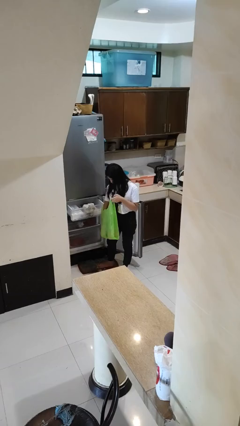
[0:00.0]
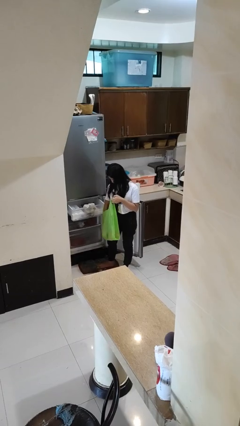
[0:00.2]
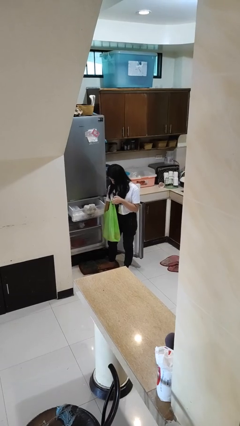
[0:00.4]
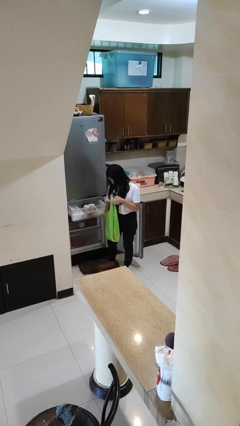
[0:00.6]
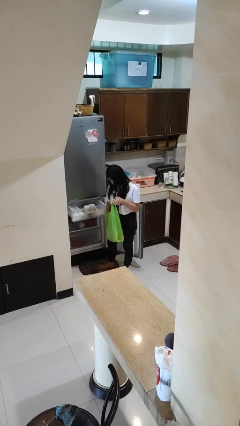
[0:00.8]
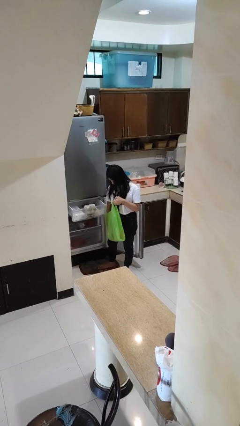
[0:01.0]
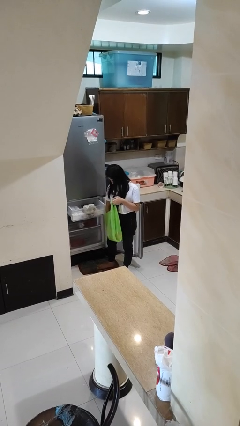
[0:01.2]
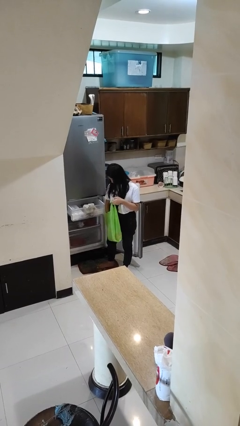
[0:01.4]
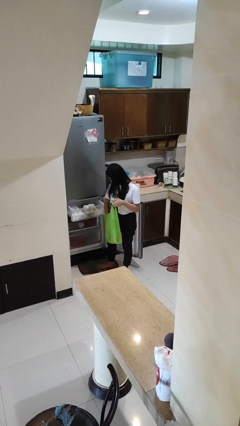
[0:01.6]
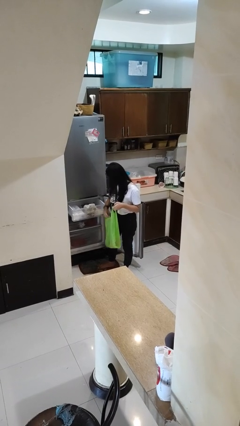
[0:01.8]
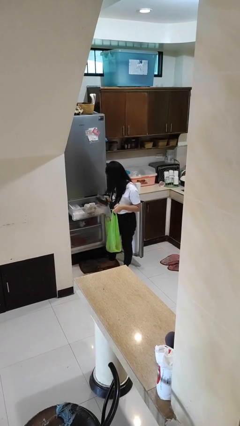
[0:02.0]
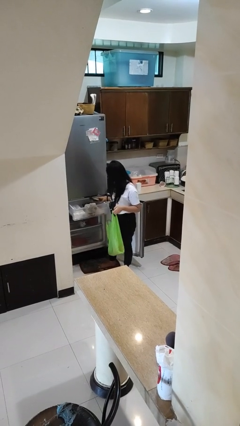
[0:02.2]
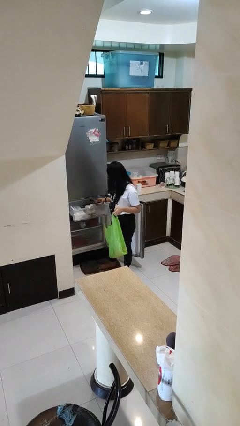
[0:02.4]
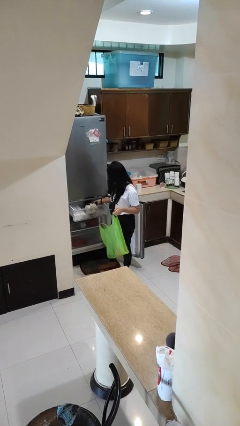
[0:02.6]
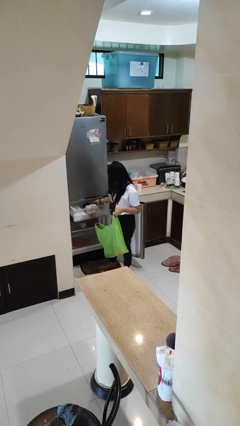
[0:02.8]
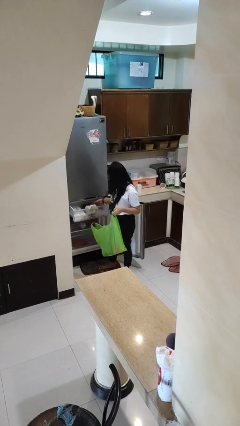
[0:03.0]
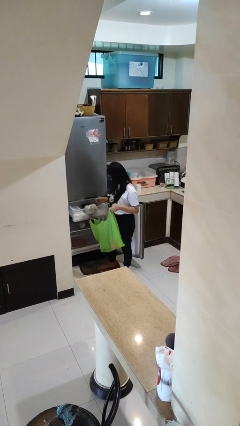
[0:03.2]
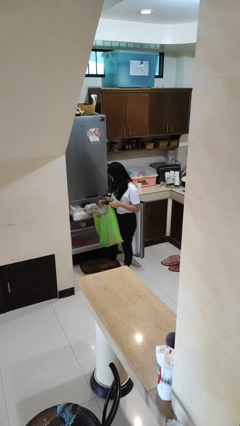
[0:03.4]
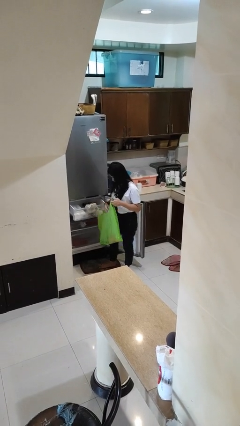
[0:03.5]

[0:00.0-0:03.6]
person loads groceries into refrigerator

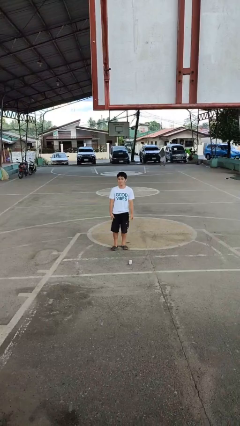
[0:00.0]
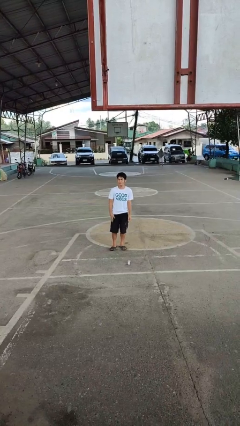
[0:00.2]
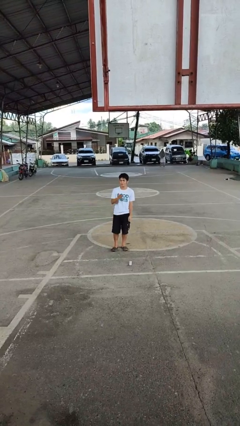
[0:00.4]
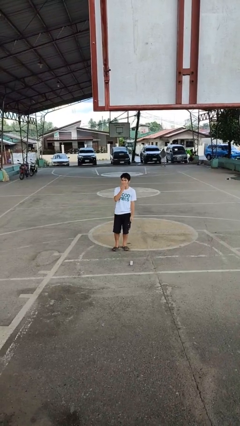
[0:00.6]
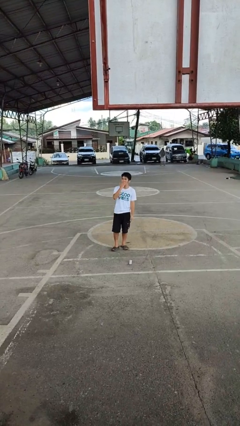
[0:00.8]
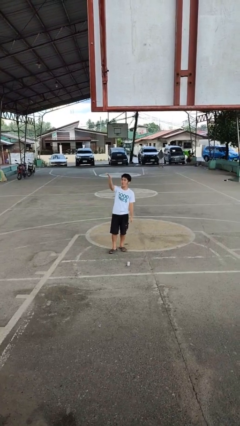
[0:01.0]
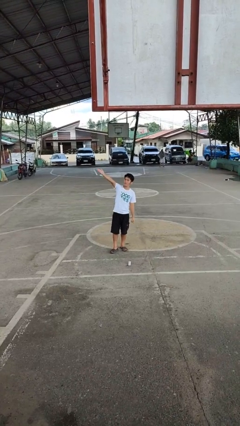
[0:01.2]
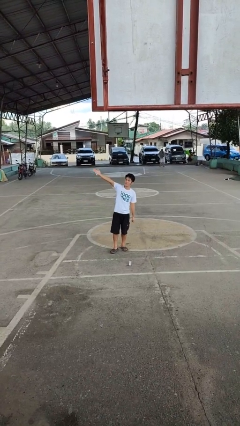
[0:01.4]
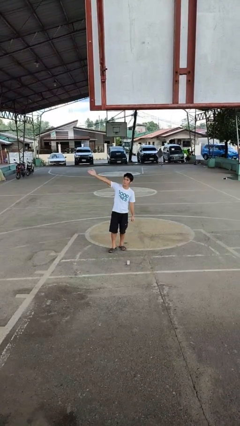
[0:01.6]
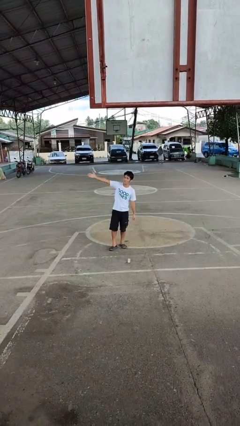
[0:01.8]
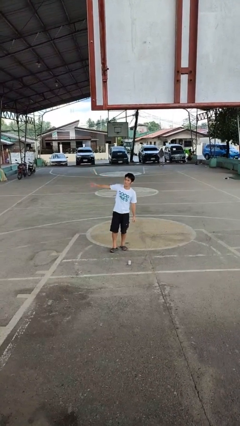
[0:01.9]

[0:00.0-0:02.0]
person gestures blow kiss

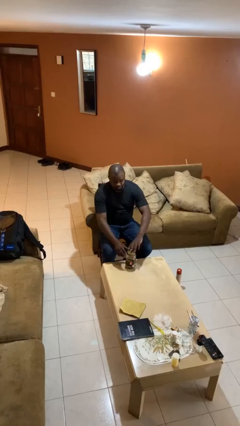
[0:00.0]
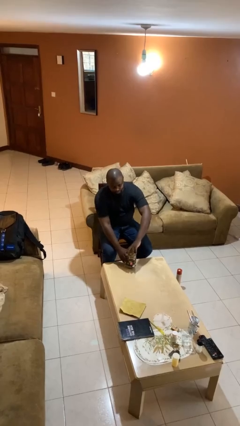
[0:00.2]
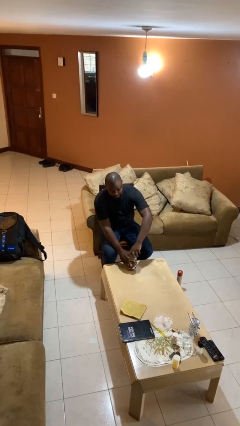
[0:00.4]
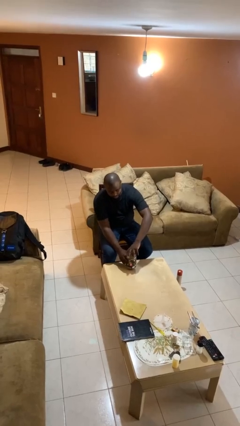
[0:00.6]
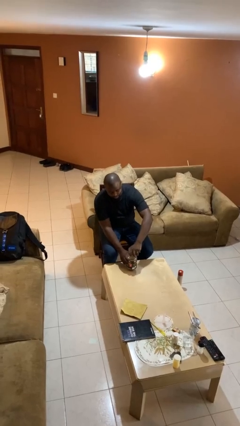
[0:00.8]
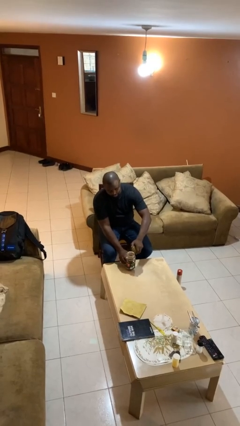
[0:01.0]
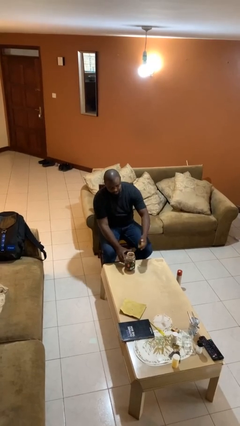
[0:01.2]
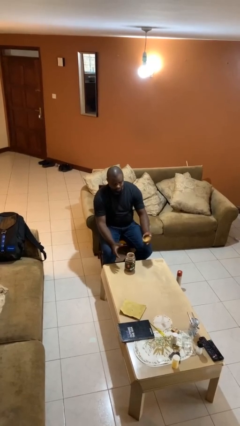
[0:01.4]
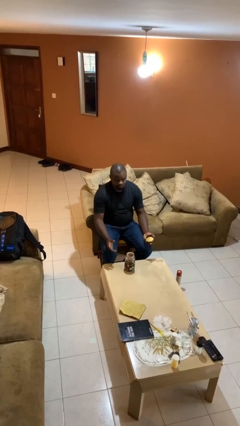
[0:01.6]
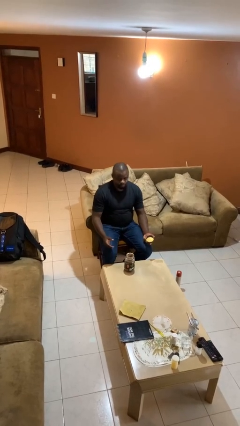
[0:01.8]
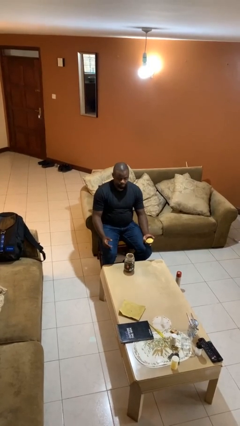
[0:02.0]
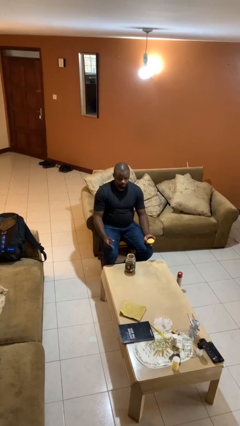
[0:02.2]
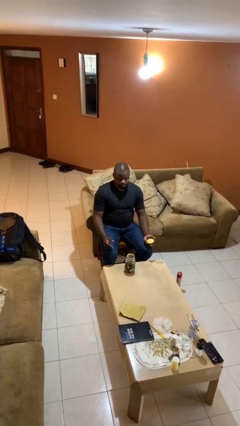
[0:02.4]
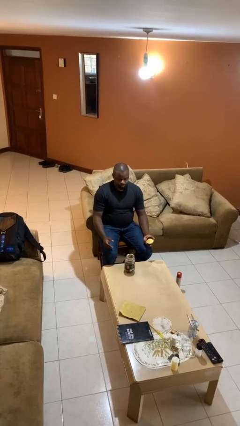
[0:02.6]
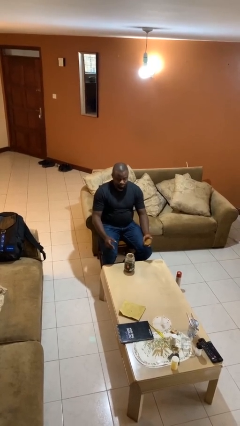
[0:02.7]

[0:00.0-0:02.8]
person opens jar

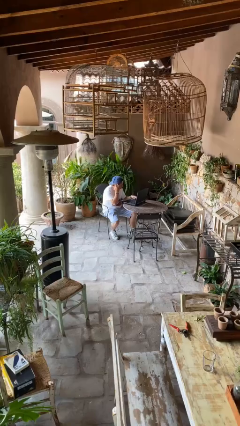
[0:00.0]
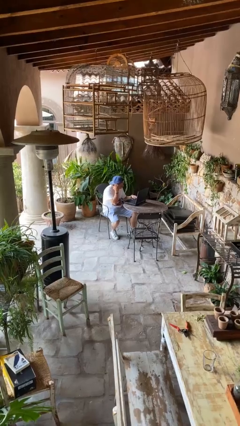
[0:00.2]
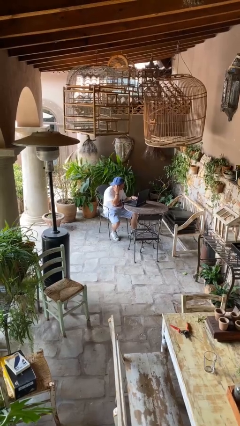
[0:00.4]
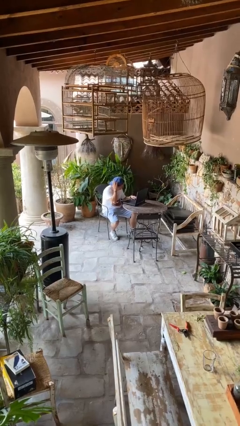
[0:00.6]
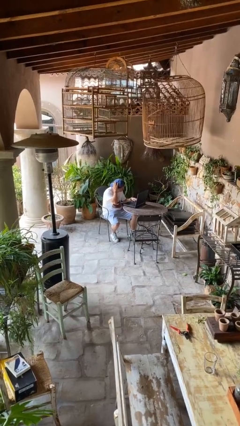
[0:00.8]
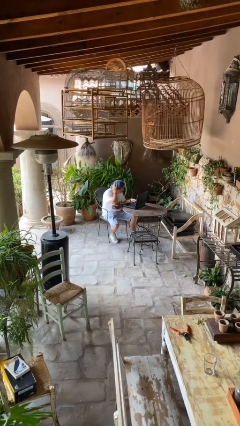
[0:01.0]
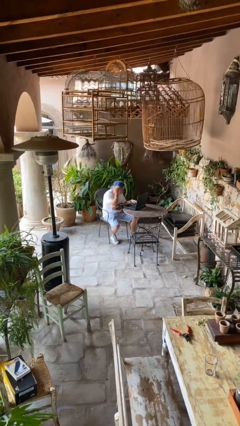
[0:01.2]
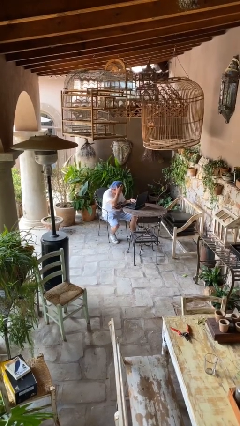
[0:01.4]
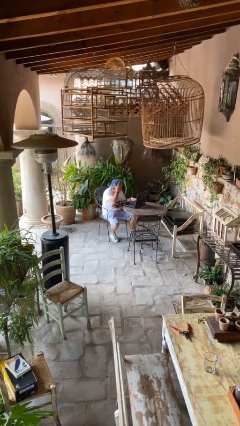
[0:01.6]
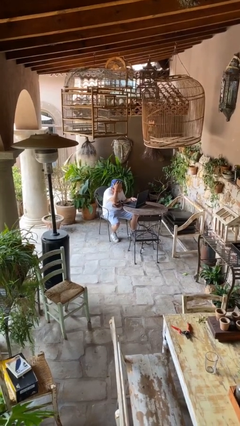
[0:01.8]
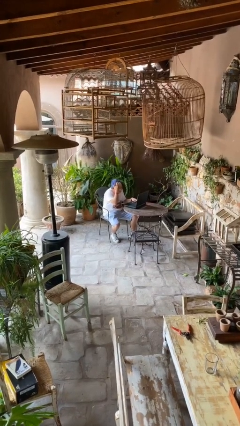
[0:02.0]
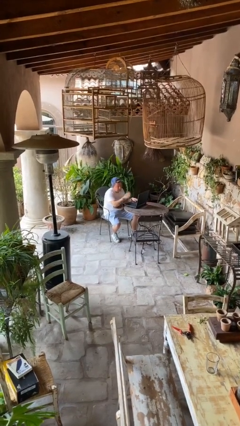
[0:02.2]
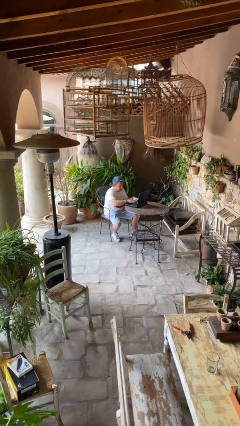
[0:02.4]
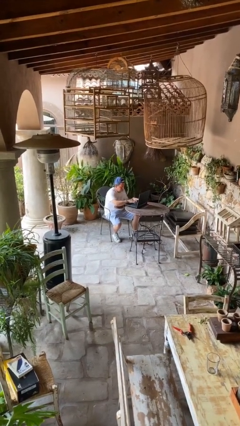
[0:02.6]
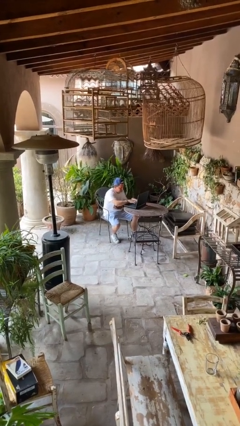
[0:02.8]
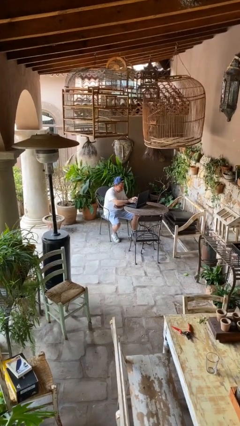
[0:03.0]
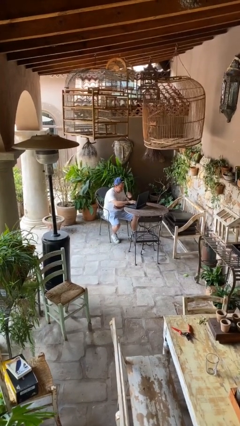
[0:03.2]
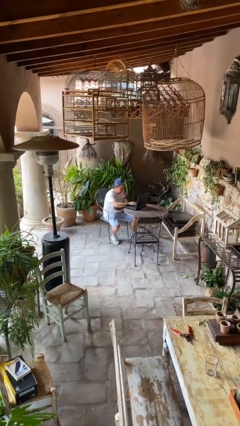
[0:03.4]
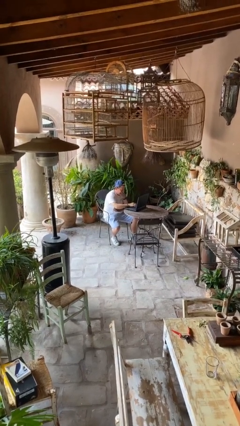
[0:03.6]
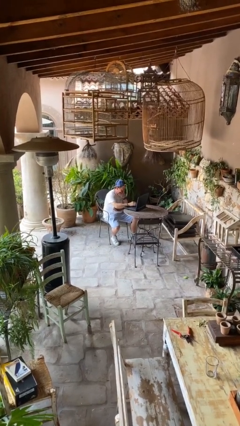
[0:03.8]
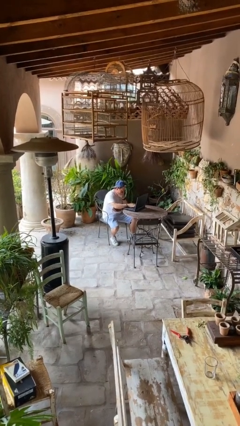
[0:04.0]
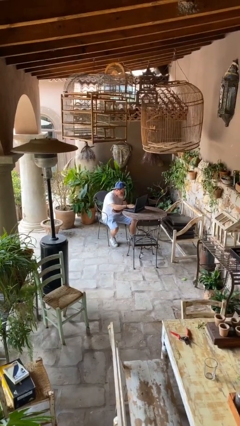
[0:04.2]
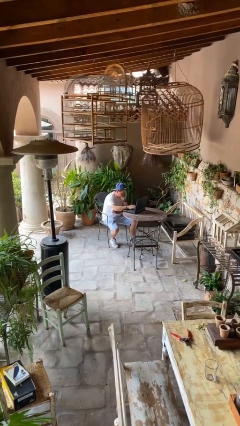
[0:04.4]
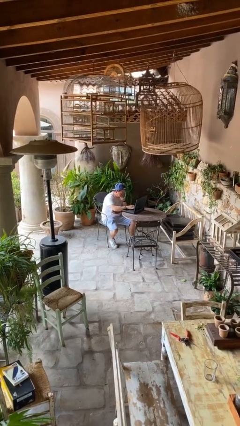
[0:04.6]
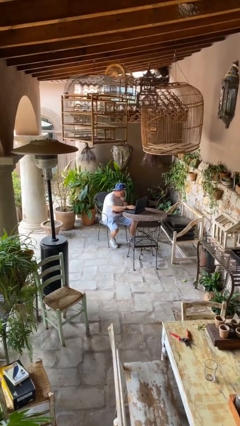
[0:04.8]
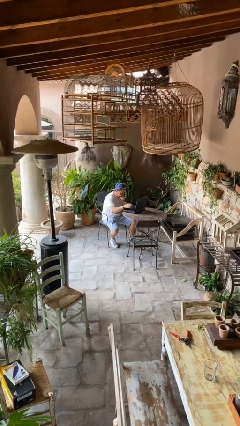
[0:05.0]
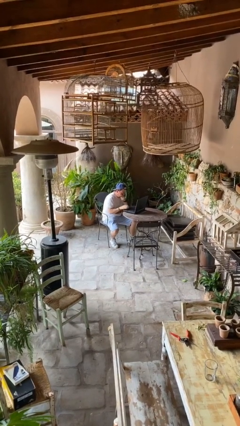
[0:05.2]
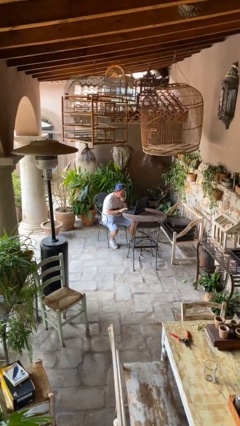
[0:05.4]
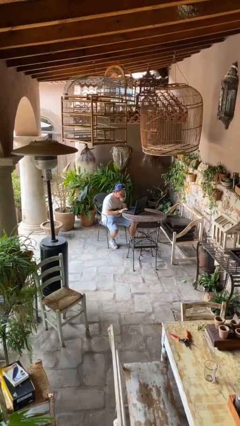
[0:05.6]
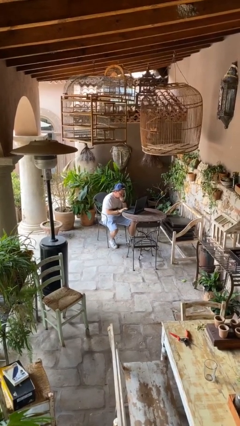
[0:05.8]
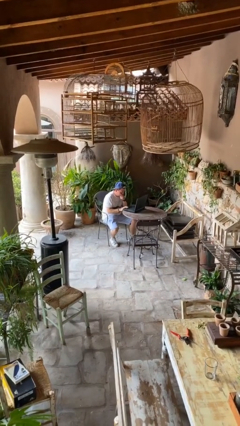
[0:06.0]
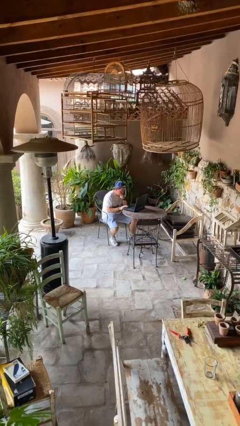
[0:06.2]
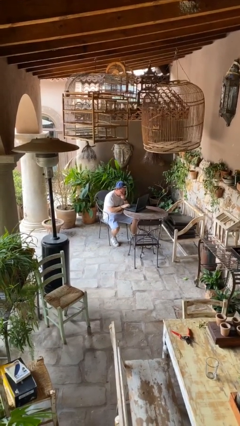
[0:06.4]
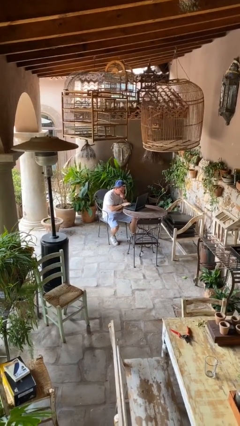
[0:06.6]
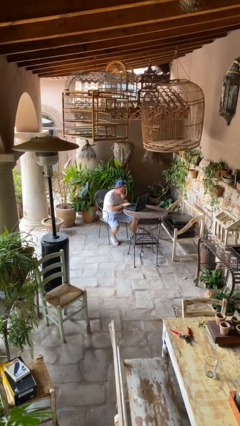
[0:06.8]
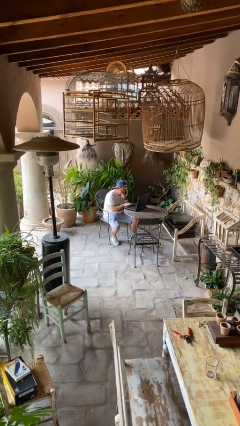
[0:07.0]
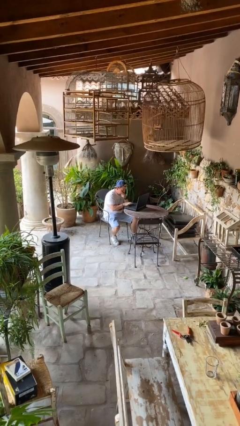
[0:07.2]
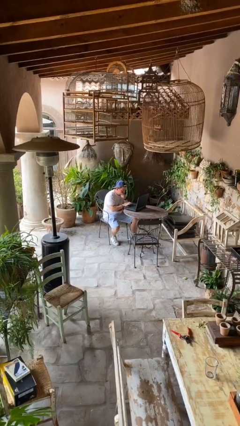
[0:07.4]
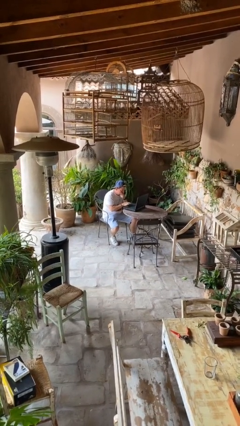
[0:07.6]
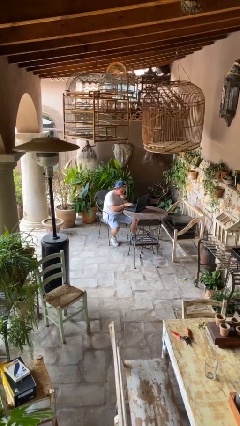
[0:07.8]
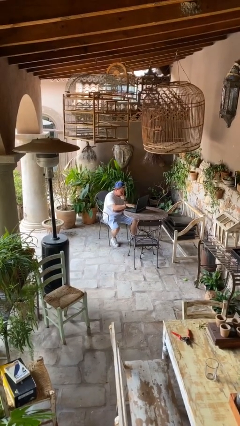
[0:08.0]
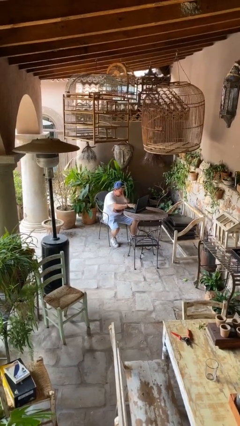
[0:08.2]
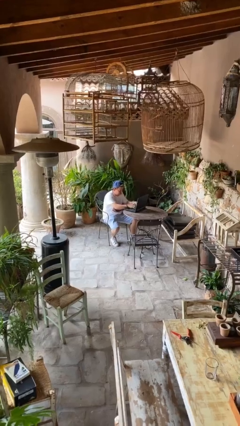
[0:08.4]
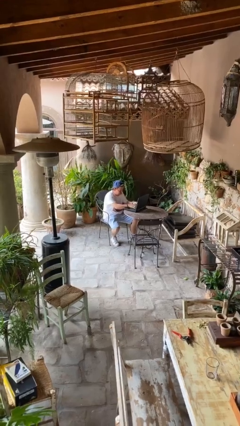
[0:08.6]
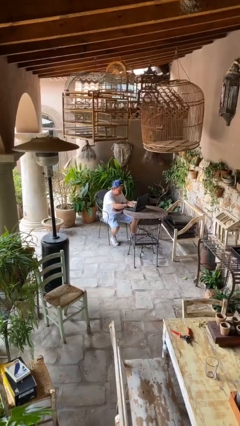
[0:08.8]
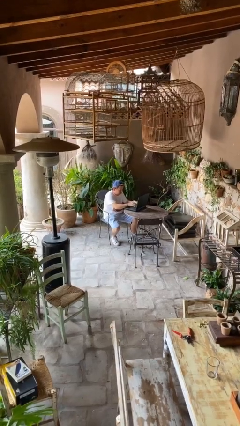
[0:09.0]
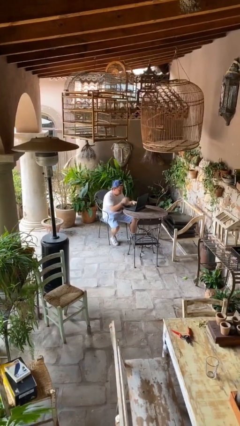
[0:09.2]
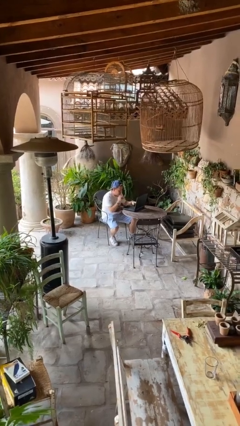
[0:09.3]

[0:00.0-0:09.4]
person interacts with laptop
